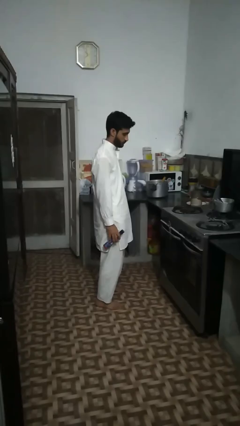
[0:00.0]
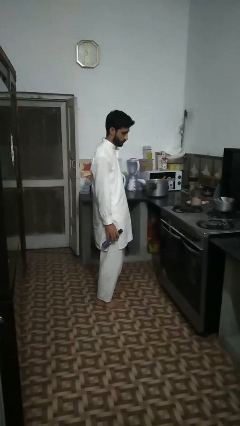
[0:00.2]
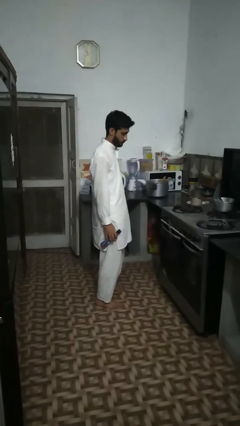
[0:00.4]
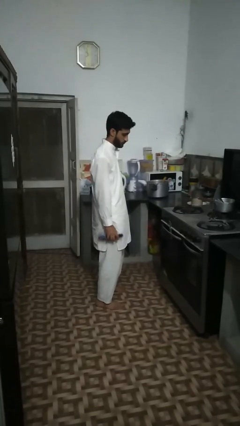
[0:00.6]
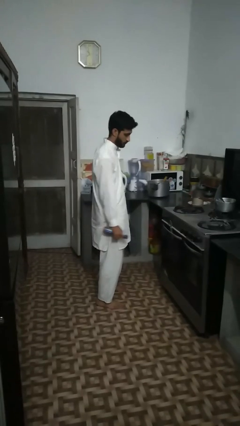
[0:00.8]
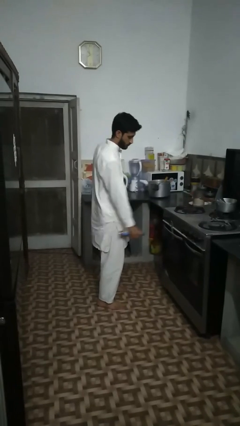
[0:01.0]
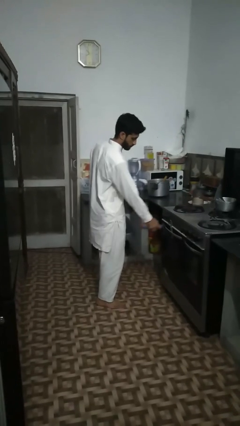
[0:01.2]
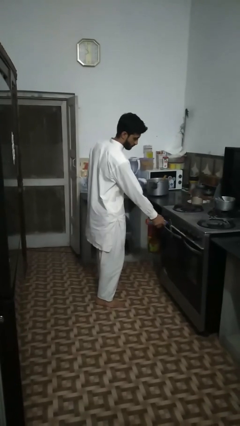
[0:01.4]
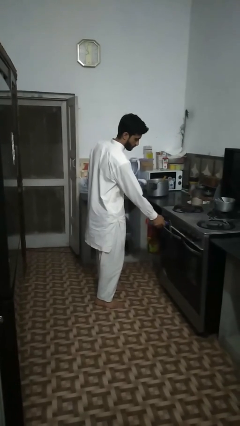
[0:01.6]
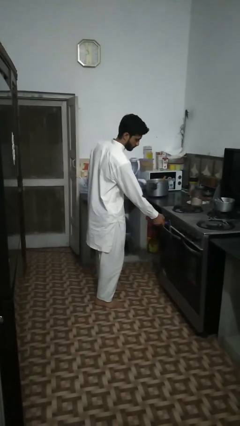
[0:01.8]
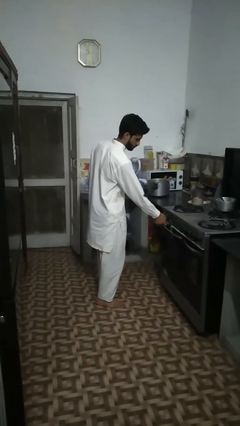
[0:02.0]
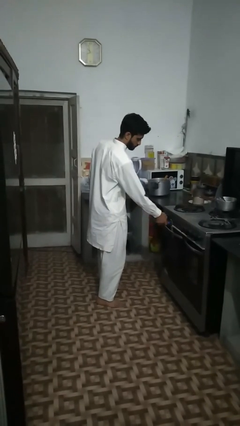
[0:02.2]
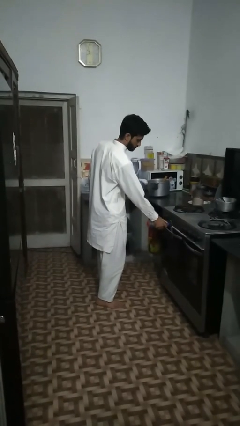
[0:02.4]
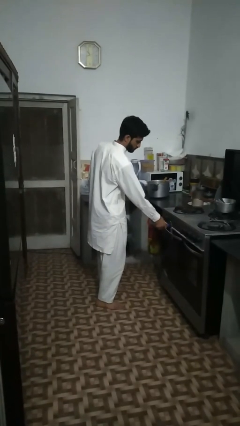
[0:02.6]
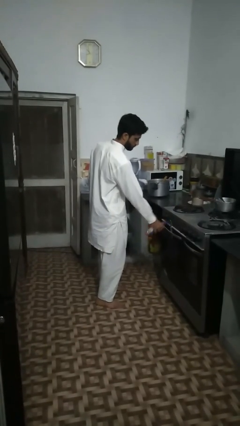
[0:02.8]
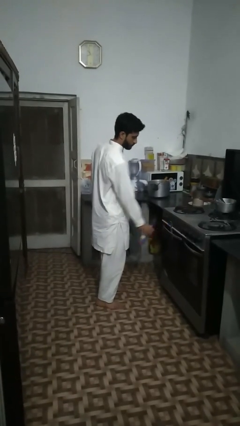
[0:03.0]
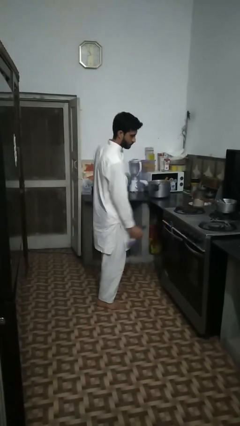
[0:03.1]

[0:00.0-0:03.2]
person opens can with can opener

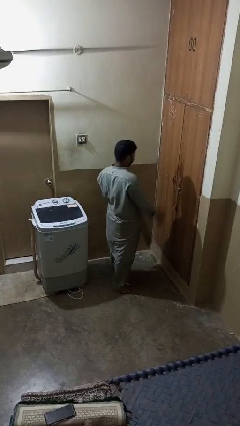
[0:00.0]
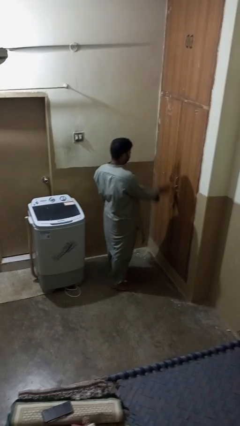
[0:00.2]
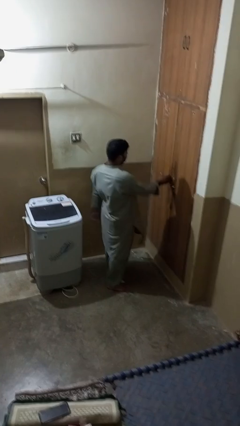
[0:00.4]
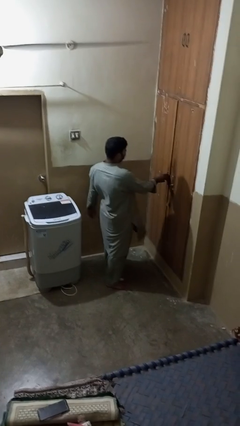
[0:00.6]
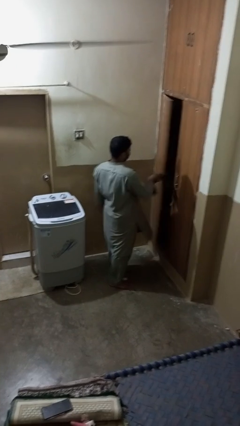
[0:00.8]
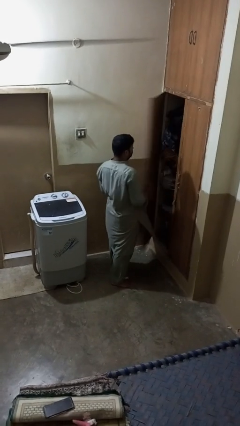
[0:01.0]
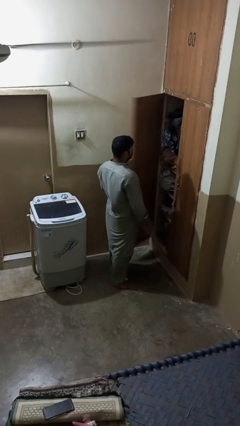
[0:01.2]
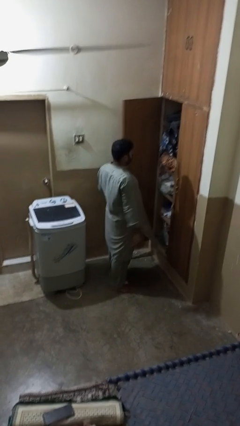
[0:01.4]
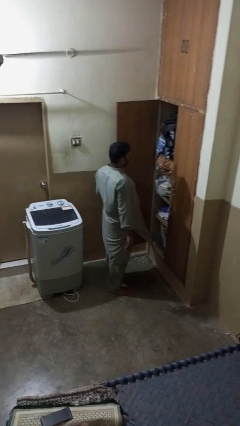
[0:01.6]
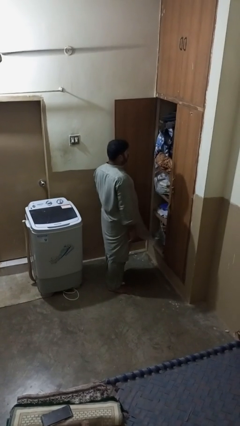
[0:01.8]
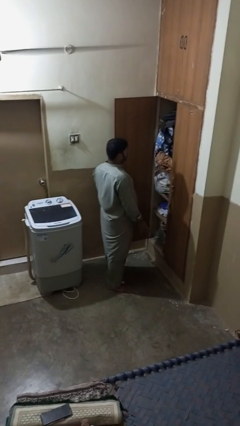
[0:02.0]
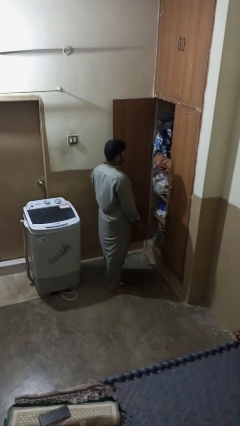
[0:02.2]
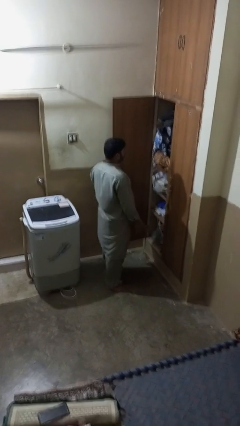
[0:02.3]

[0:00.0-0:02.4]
person opens closet door

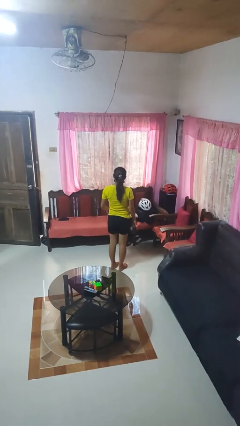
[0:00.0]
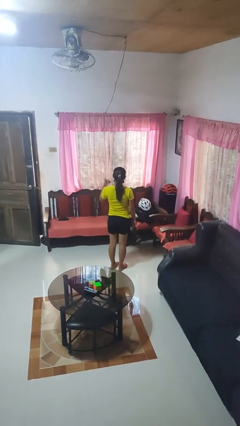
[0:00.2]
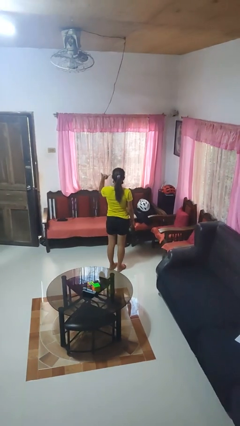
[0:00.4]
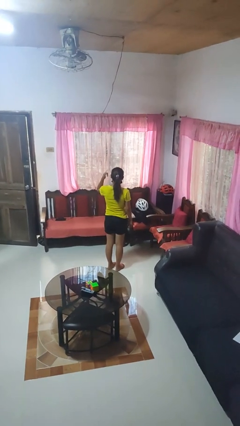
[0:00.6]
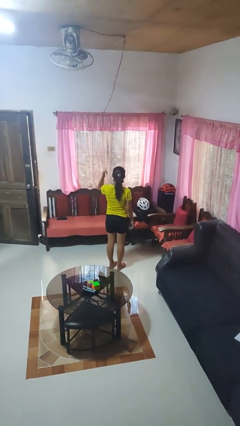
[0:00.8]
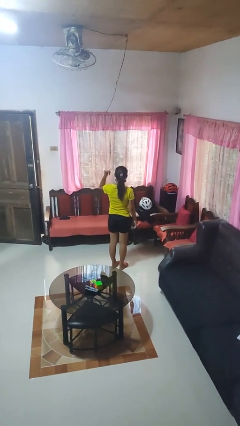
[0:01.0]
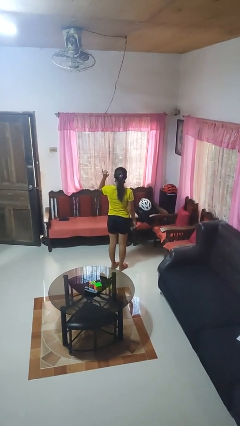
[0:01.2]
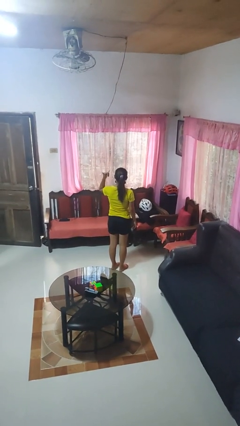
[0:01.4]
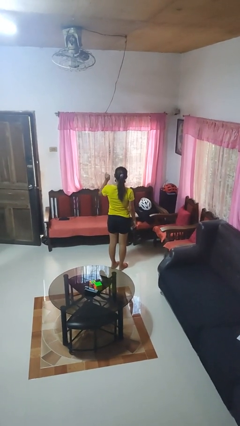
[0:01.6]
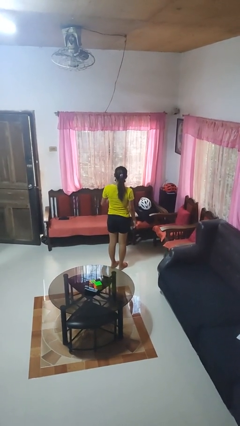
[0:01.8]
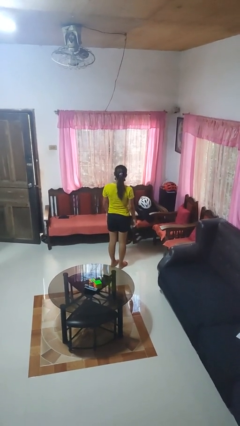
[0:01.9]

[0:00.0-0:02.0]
person gestures hang loose

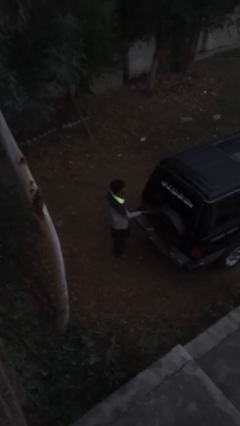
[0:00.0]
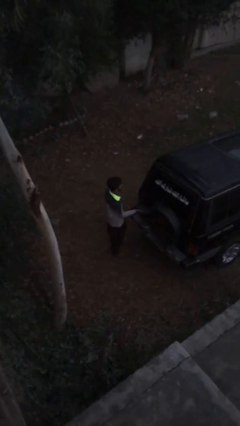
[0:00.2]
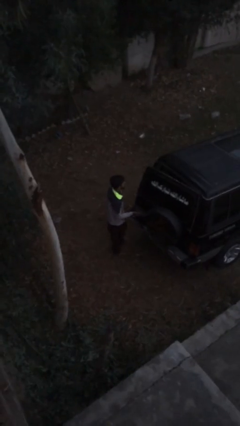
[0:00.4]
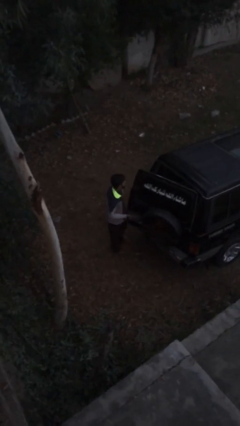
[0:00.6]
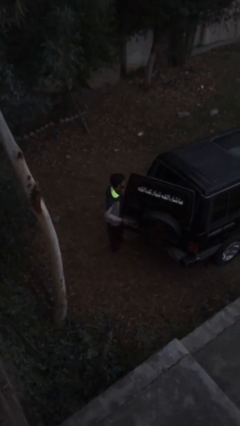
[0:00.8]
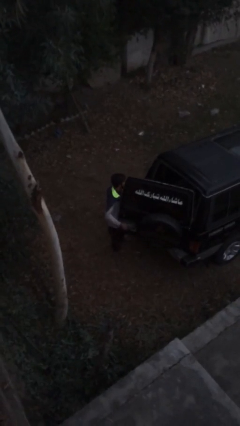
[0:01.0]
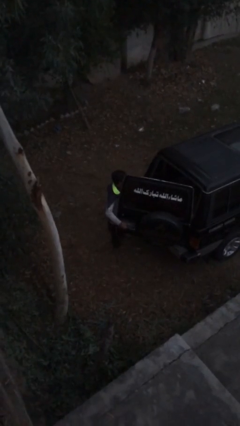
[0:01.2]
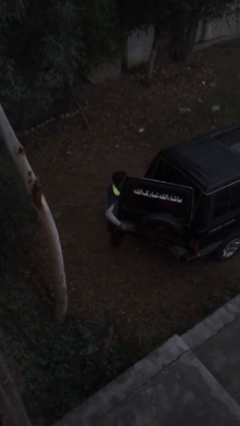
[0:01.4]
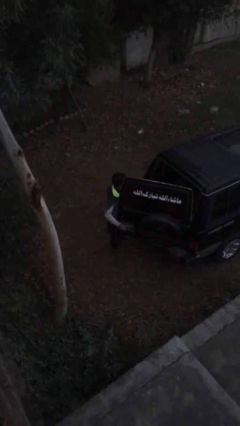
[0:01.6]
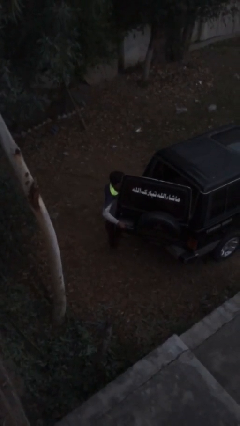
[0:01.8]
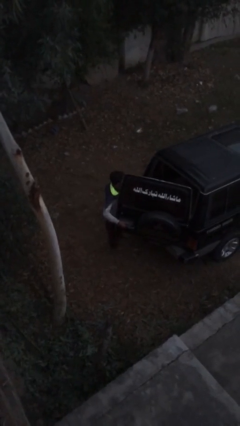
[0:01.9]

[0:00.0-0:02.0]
person opens car trunk

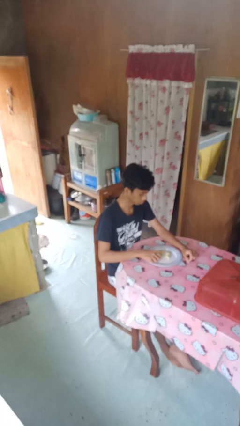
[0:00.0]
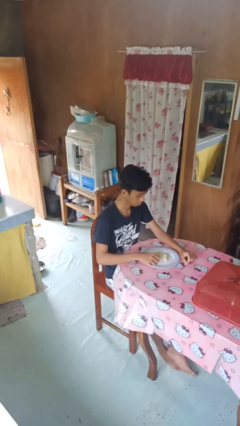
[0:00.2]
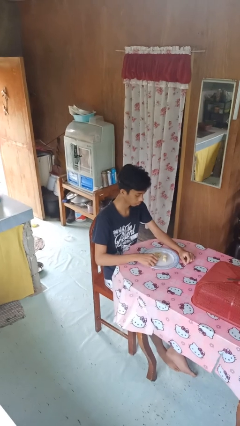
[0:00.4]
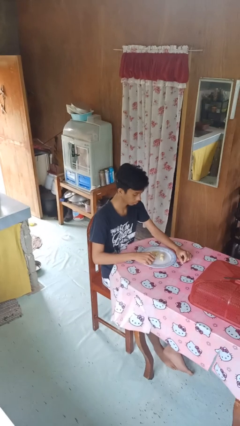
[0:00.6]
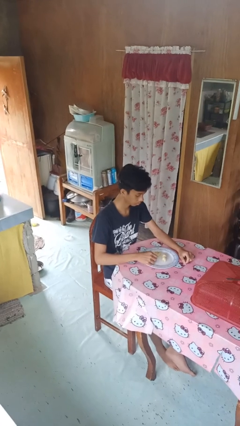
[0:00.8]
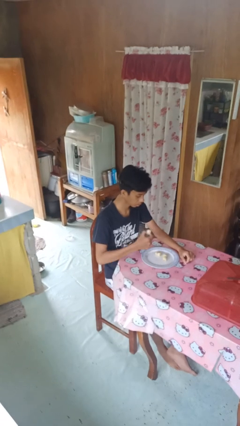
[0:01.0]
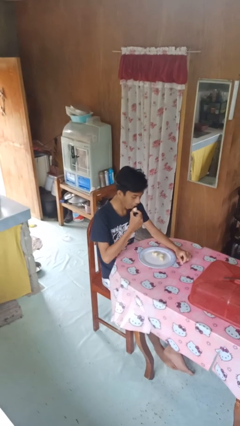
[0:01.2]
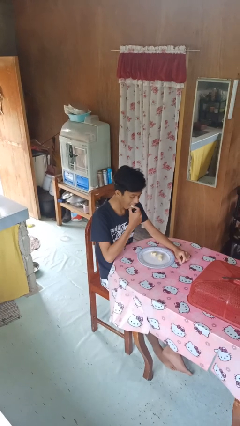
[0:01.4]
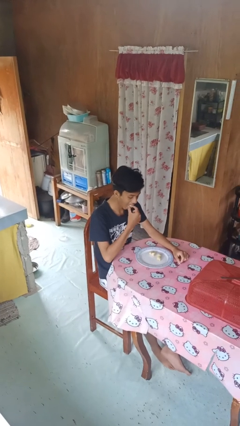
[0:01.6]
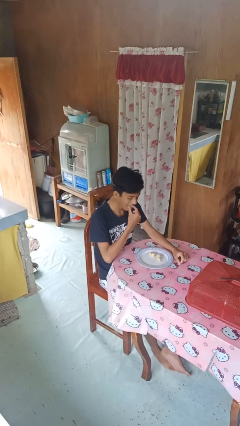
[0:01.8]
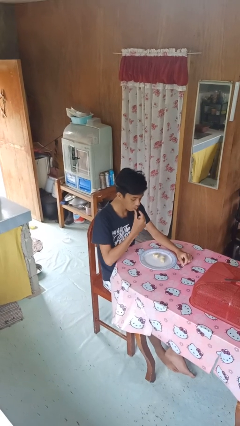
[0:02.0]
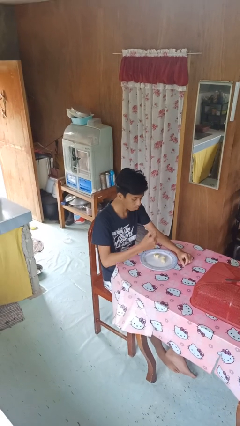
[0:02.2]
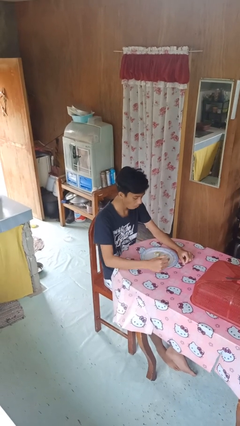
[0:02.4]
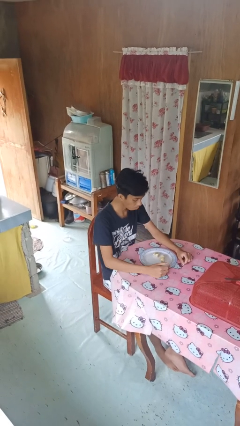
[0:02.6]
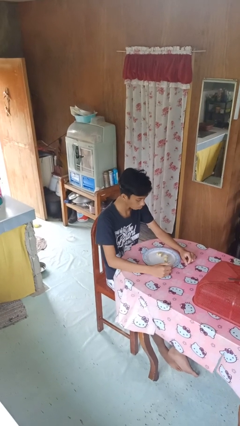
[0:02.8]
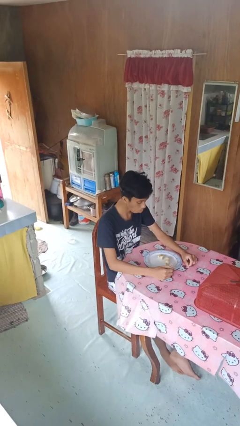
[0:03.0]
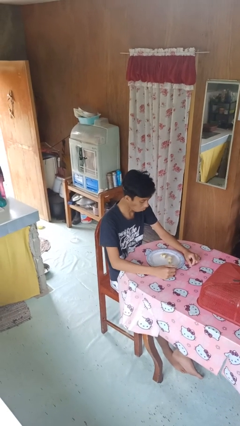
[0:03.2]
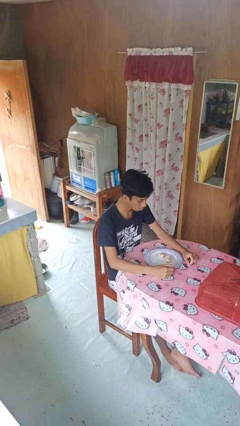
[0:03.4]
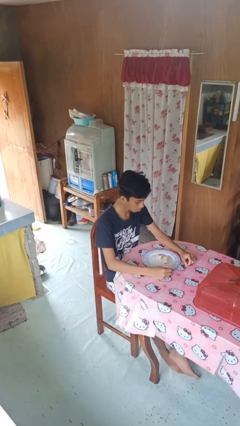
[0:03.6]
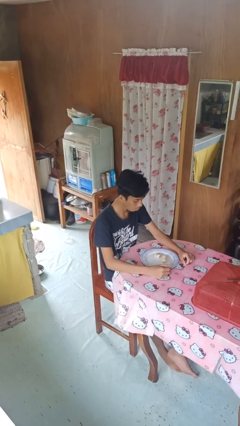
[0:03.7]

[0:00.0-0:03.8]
person eats with hands

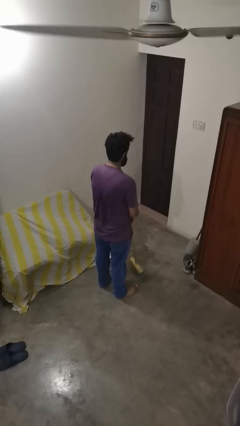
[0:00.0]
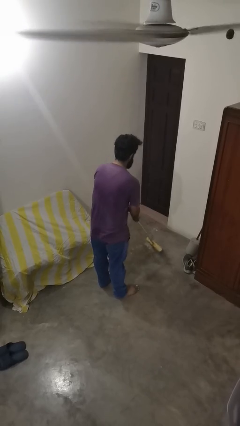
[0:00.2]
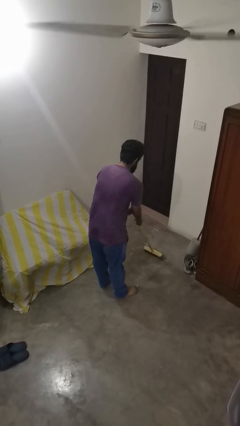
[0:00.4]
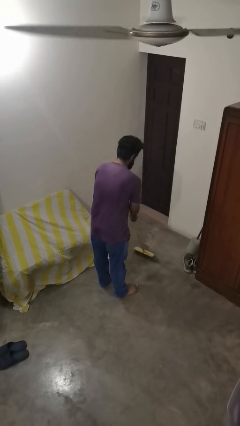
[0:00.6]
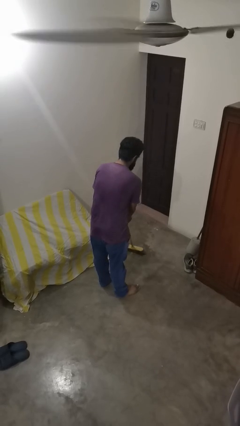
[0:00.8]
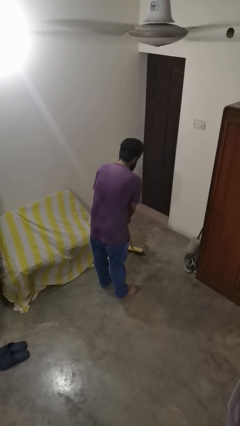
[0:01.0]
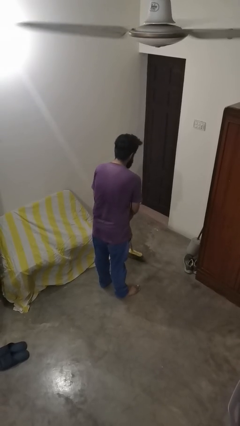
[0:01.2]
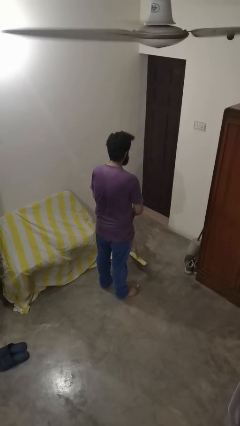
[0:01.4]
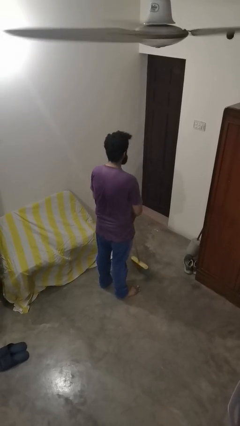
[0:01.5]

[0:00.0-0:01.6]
person sweeps floor

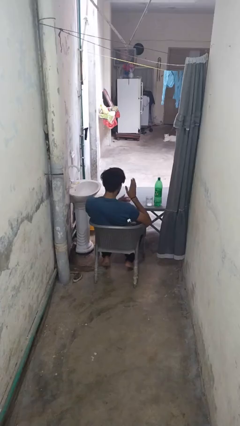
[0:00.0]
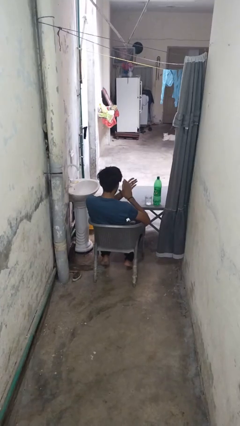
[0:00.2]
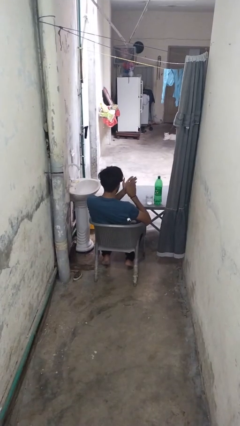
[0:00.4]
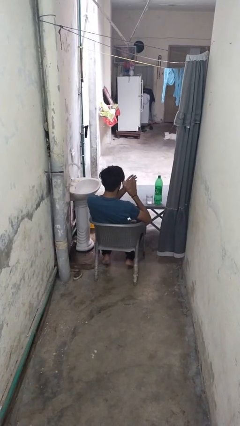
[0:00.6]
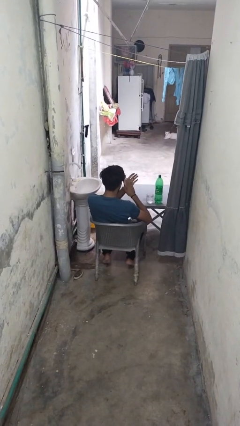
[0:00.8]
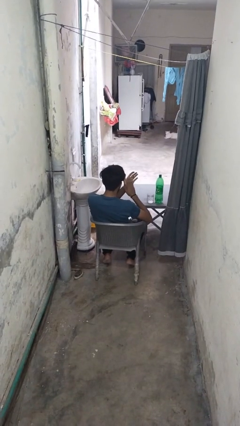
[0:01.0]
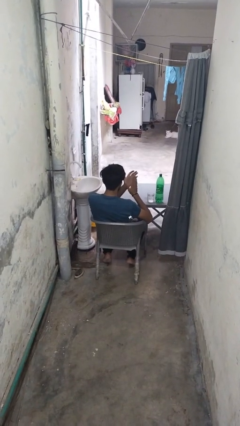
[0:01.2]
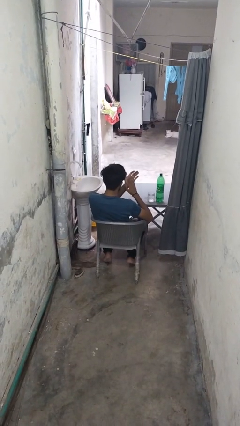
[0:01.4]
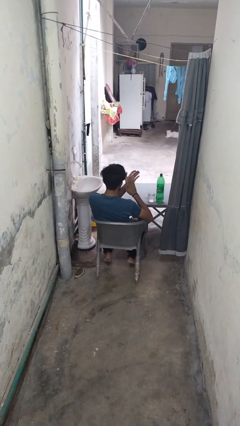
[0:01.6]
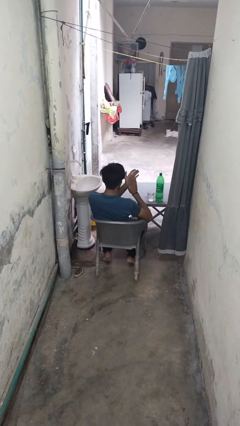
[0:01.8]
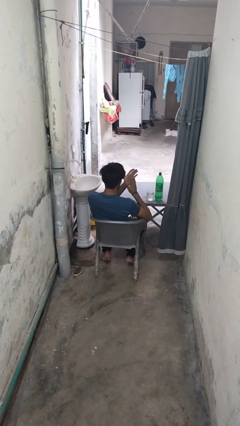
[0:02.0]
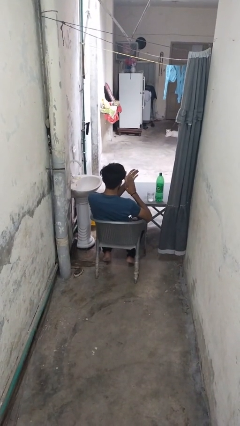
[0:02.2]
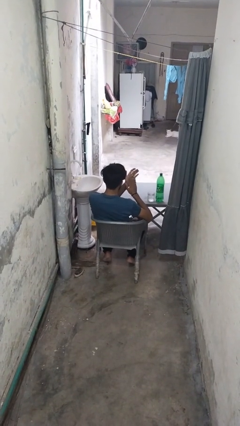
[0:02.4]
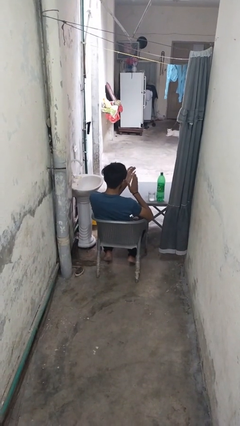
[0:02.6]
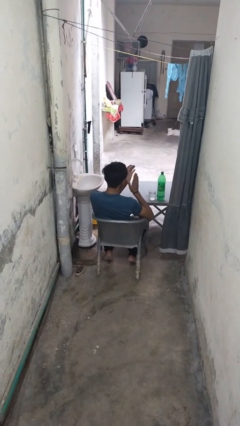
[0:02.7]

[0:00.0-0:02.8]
person claps hands
